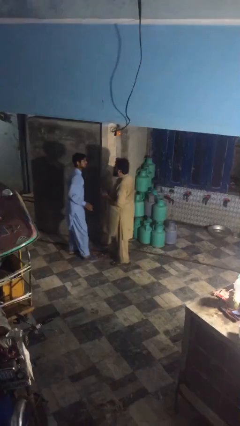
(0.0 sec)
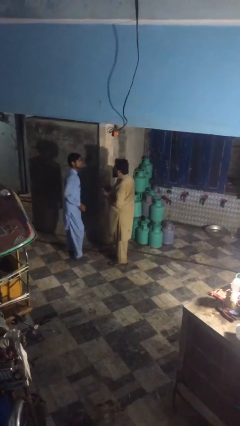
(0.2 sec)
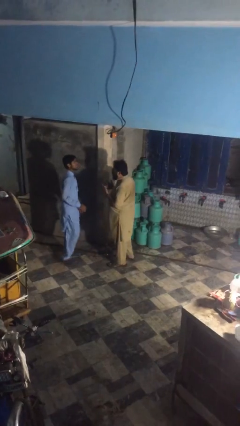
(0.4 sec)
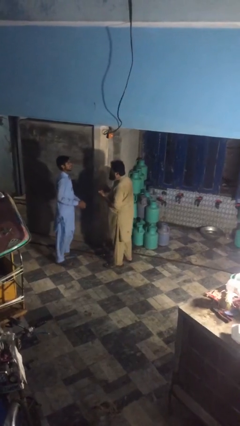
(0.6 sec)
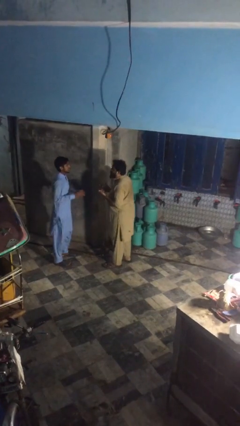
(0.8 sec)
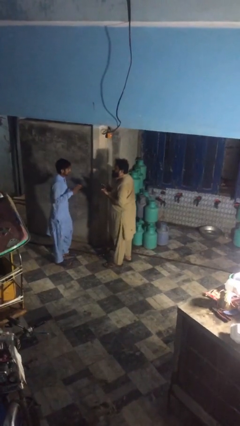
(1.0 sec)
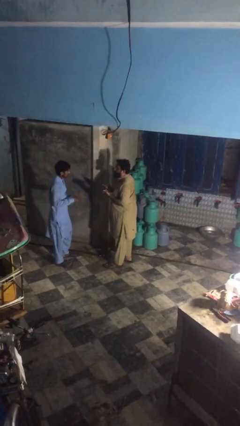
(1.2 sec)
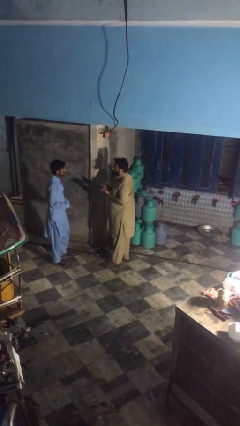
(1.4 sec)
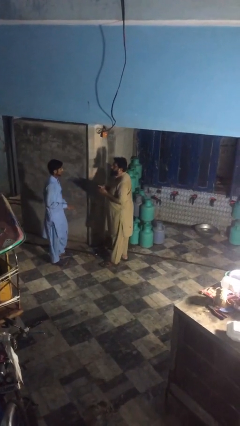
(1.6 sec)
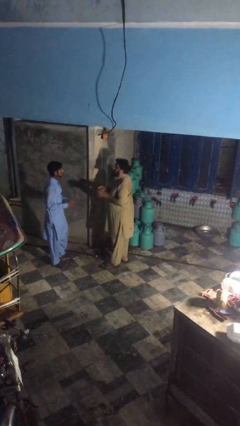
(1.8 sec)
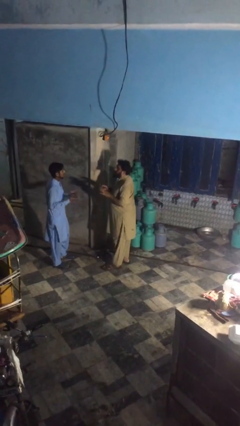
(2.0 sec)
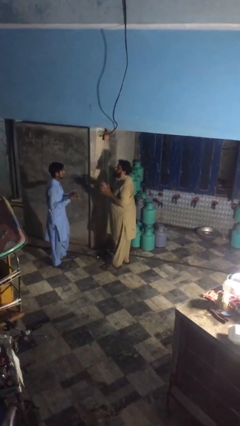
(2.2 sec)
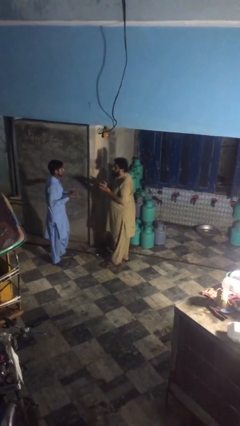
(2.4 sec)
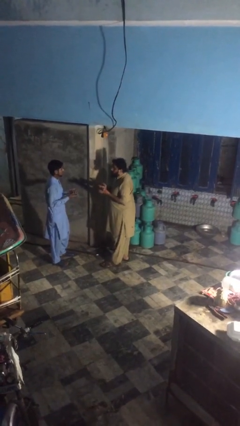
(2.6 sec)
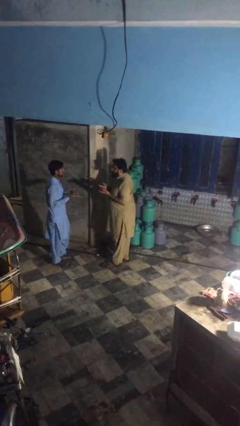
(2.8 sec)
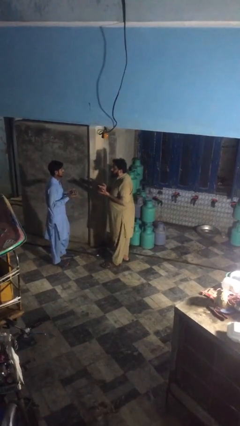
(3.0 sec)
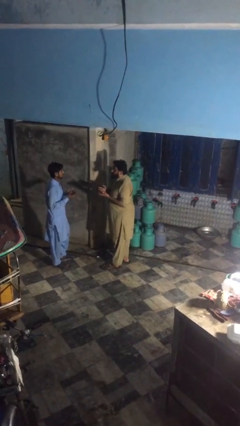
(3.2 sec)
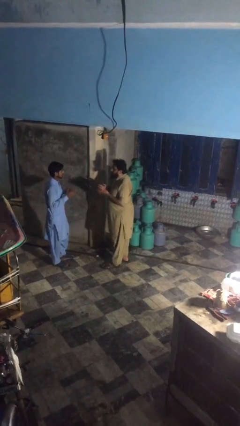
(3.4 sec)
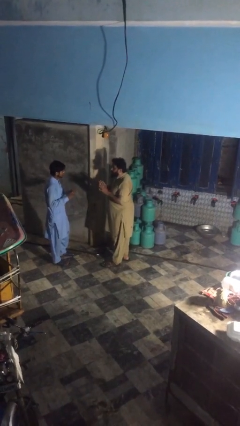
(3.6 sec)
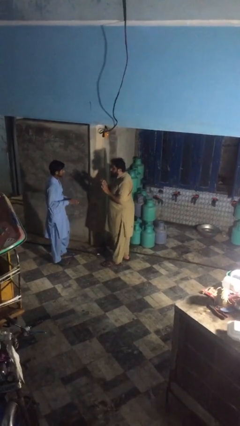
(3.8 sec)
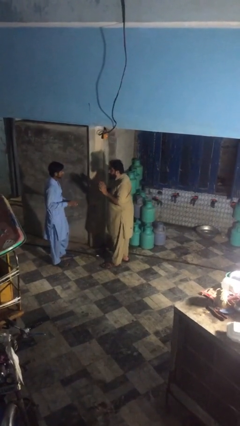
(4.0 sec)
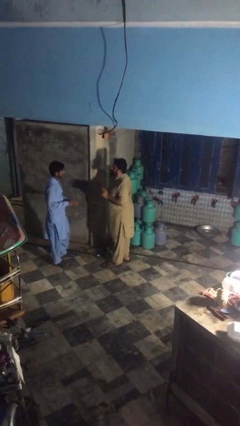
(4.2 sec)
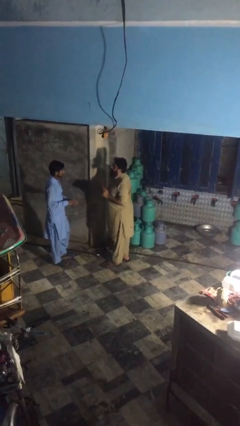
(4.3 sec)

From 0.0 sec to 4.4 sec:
person talks to person

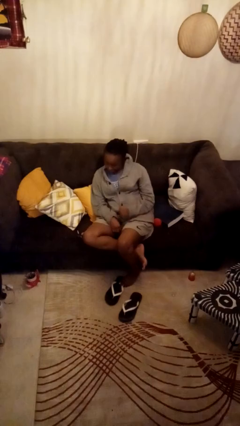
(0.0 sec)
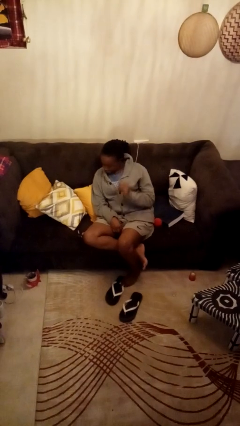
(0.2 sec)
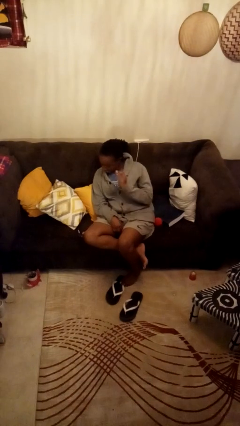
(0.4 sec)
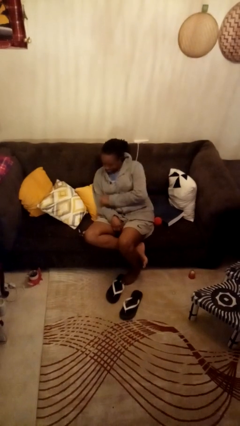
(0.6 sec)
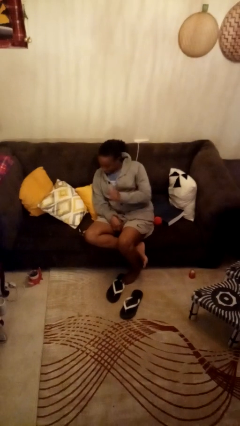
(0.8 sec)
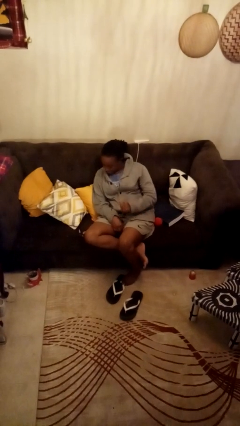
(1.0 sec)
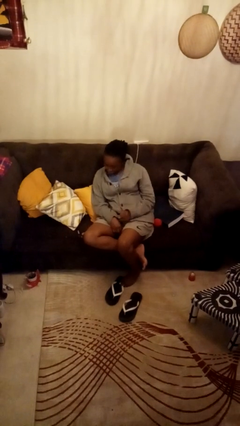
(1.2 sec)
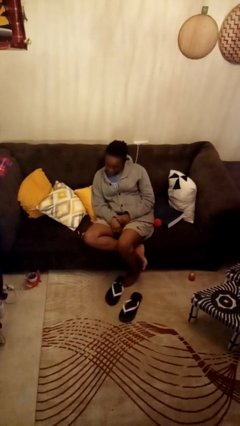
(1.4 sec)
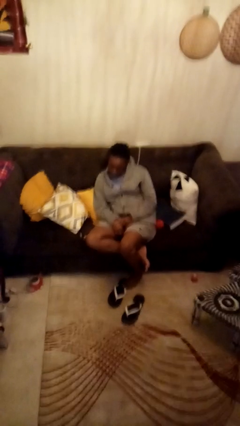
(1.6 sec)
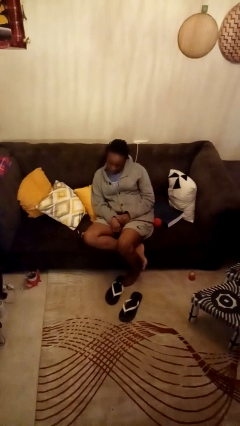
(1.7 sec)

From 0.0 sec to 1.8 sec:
person swats bug

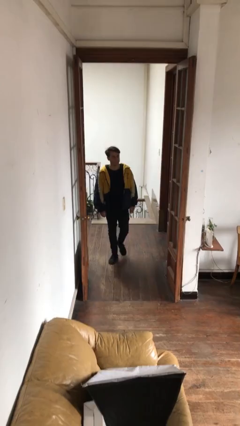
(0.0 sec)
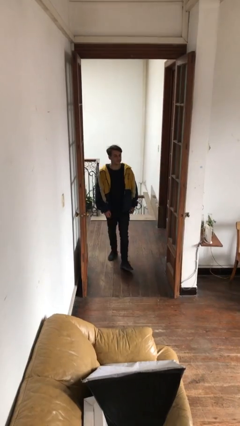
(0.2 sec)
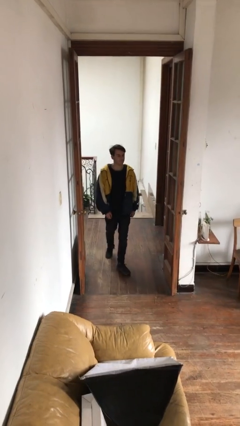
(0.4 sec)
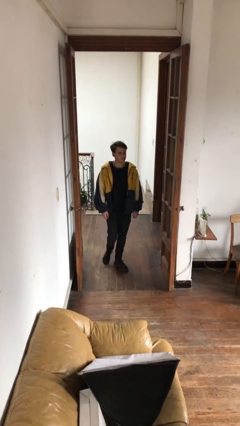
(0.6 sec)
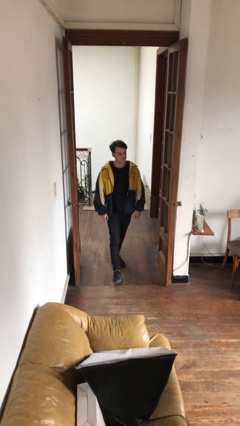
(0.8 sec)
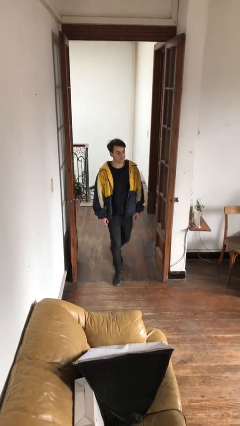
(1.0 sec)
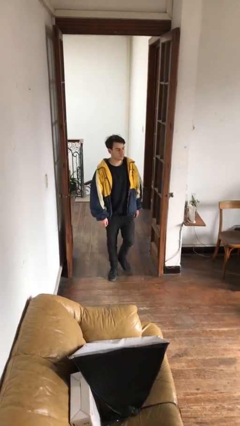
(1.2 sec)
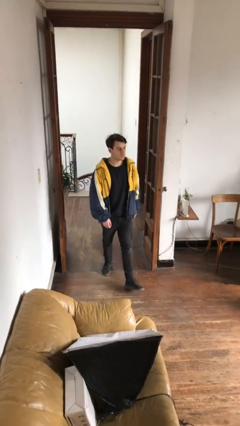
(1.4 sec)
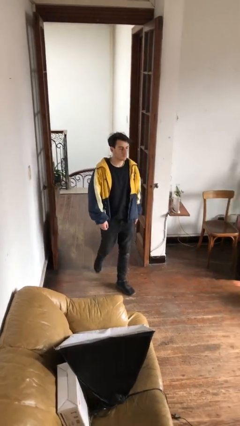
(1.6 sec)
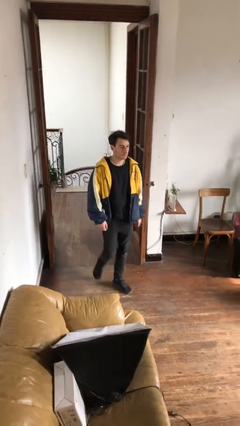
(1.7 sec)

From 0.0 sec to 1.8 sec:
person enters scene through structure

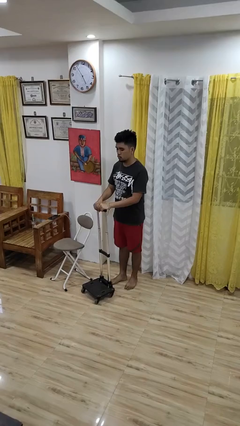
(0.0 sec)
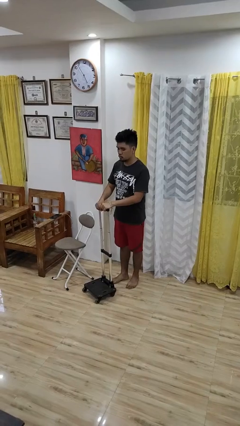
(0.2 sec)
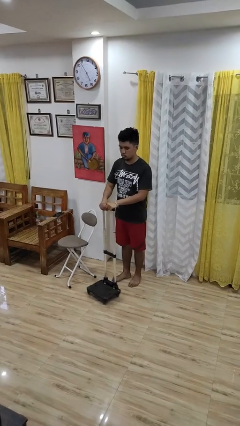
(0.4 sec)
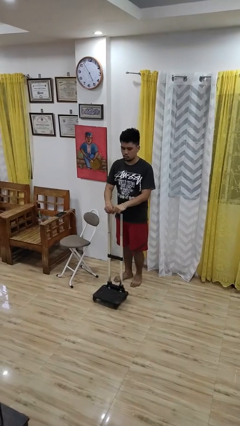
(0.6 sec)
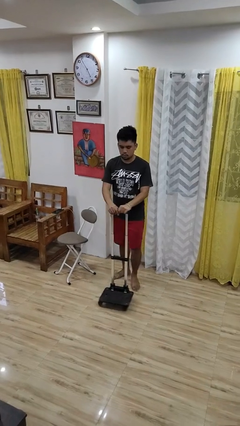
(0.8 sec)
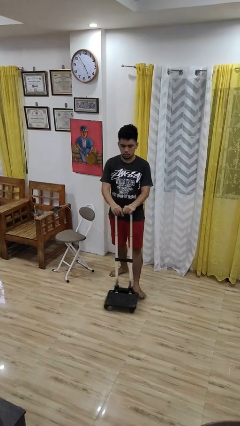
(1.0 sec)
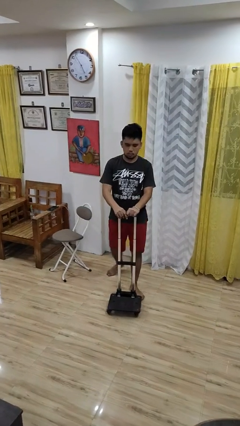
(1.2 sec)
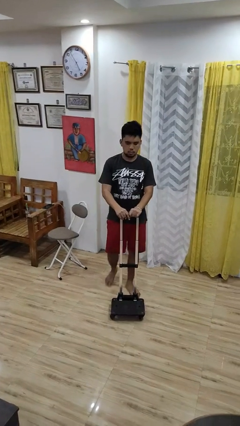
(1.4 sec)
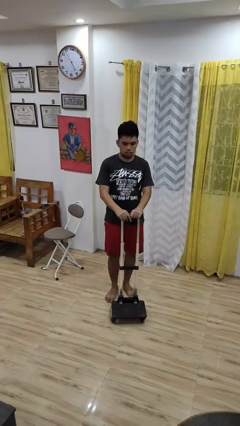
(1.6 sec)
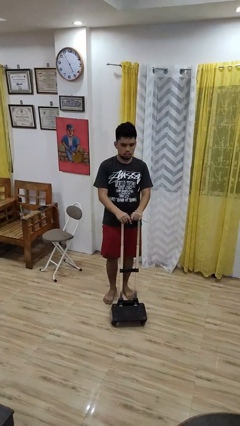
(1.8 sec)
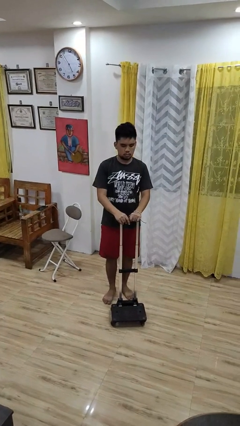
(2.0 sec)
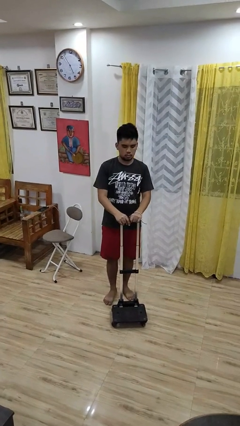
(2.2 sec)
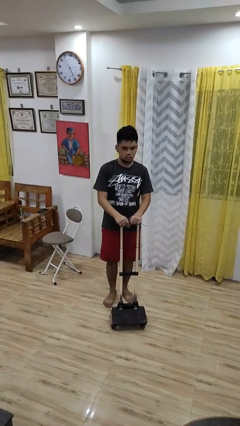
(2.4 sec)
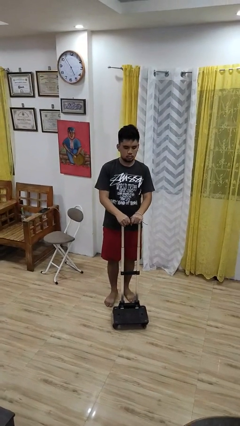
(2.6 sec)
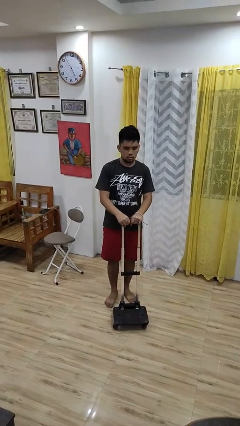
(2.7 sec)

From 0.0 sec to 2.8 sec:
person pushes wheeled cart

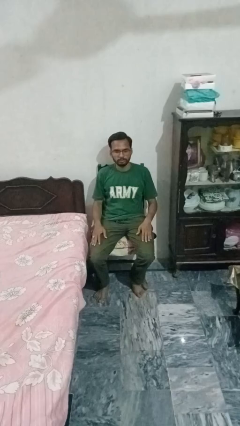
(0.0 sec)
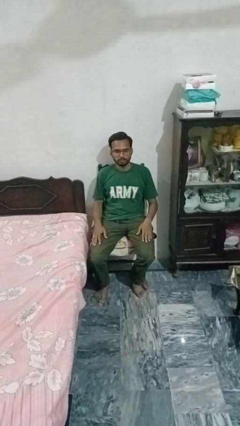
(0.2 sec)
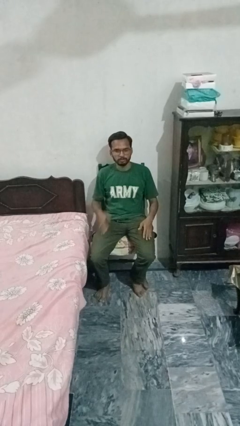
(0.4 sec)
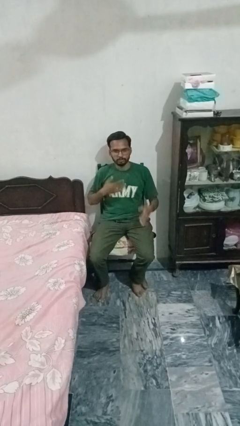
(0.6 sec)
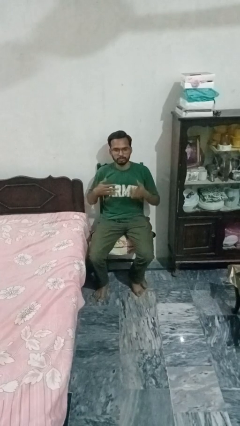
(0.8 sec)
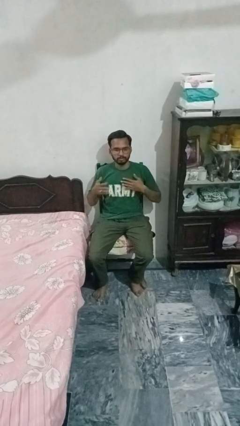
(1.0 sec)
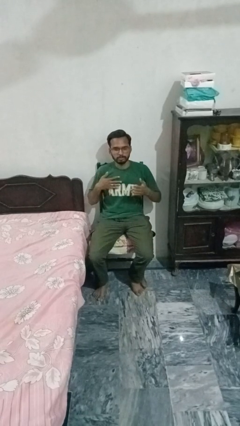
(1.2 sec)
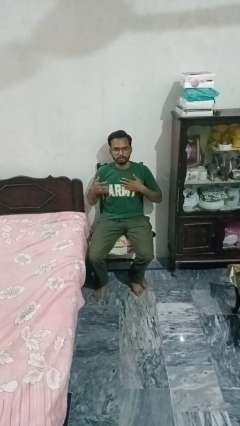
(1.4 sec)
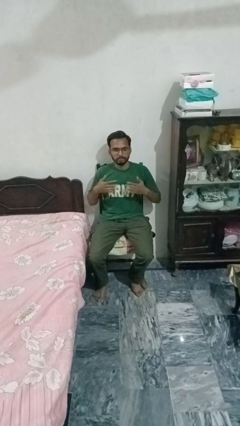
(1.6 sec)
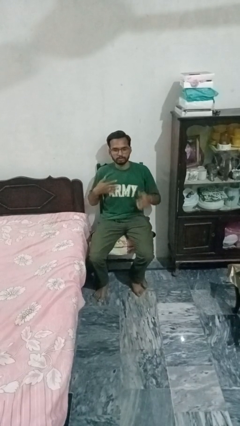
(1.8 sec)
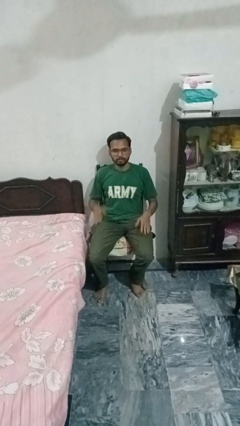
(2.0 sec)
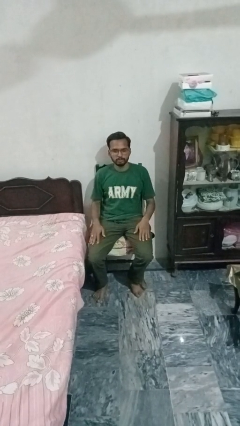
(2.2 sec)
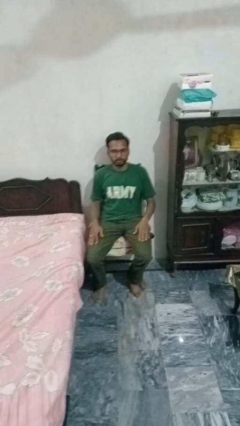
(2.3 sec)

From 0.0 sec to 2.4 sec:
person drums on chest

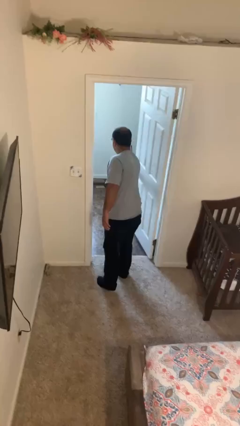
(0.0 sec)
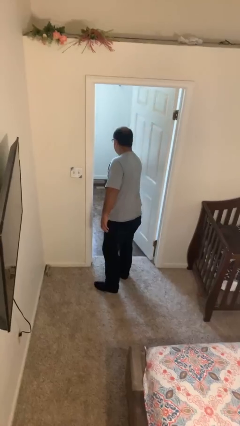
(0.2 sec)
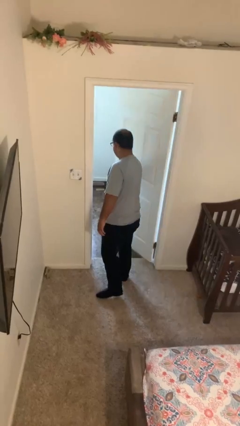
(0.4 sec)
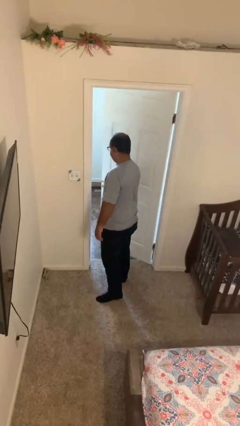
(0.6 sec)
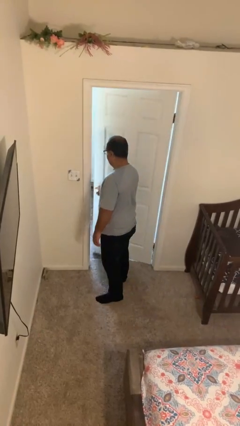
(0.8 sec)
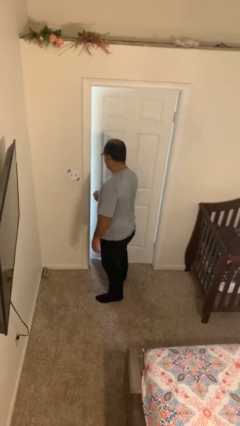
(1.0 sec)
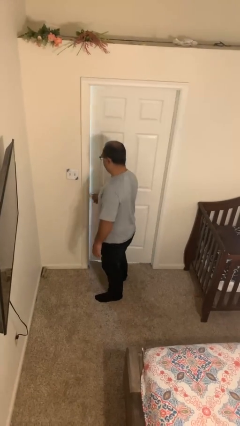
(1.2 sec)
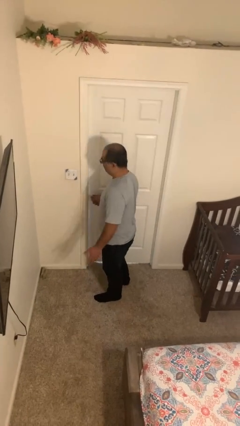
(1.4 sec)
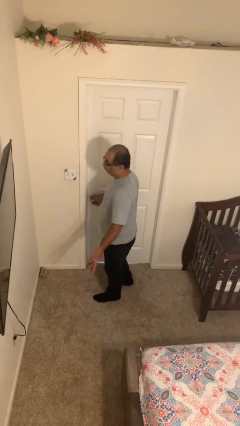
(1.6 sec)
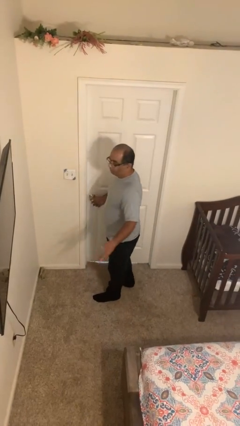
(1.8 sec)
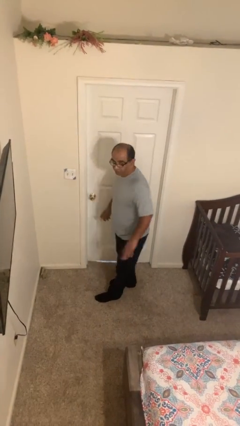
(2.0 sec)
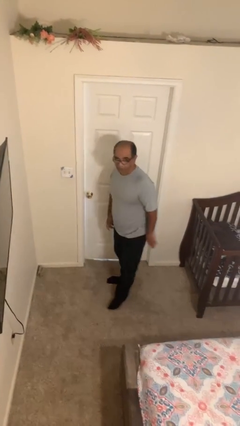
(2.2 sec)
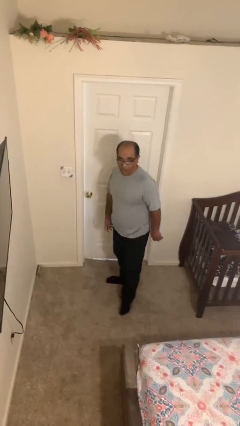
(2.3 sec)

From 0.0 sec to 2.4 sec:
person closes facility door

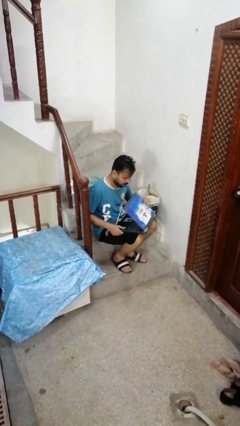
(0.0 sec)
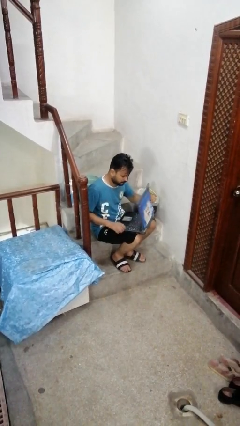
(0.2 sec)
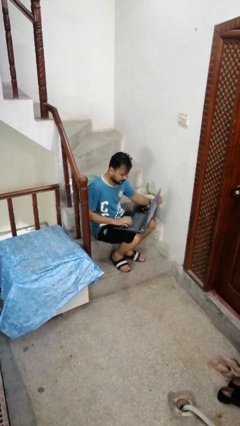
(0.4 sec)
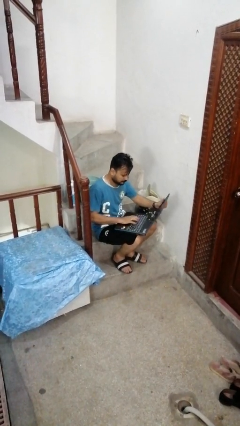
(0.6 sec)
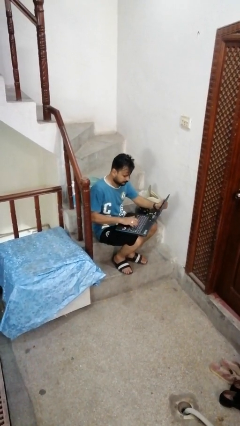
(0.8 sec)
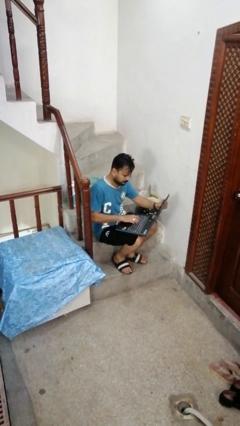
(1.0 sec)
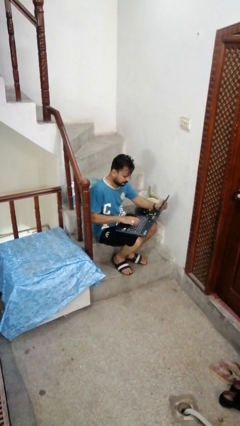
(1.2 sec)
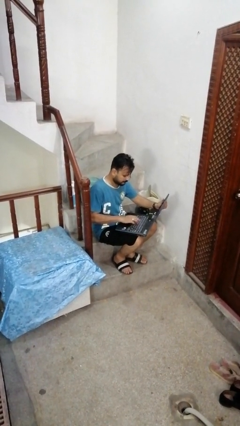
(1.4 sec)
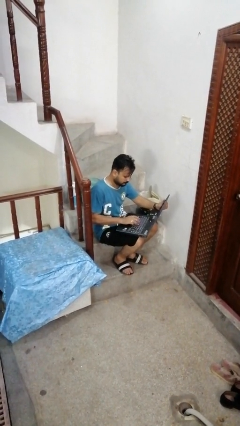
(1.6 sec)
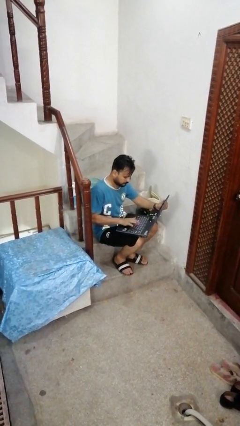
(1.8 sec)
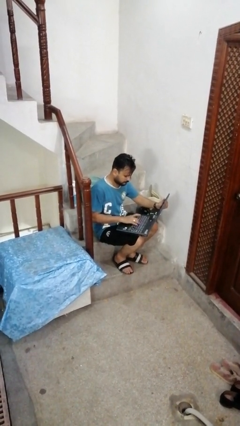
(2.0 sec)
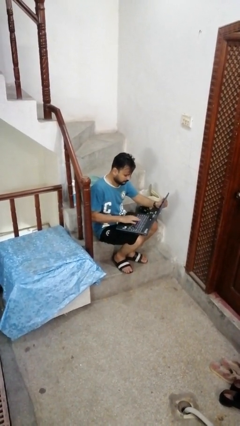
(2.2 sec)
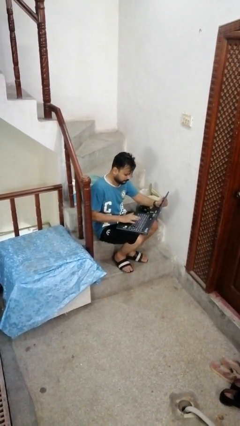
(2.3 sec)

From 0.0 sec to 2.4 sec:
person opens laptop
